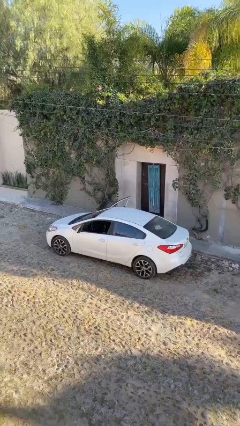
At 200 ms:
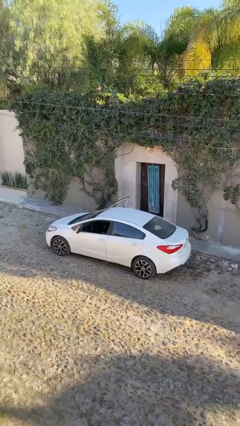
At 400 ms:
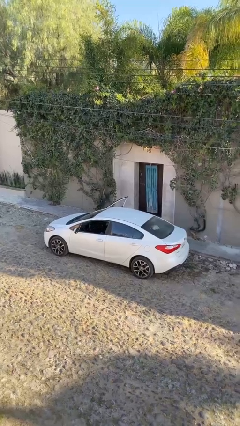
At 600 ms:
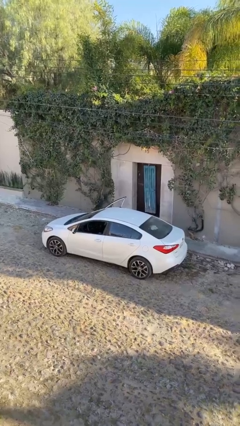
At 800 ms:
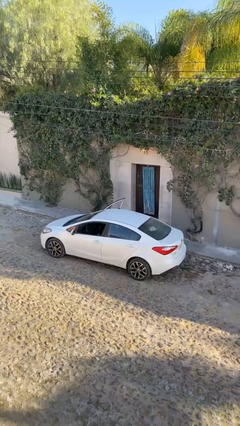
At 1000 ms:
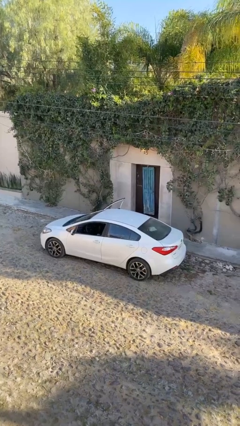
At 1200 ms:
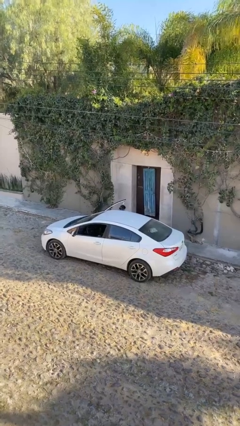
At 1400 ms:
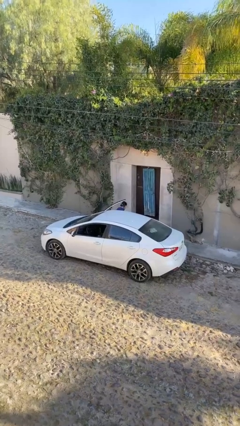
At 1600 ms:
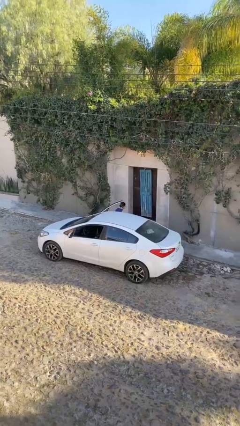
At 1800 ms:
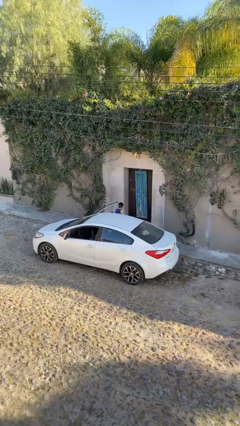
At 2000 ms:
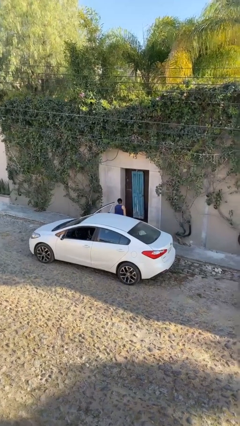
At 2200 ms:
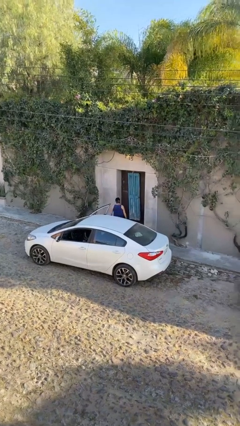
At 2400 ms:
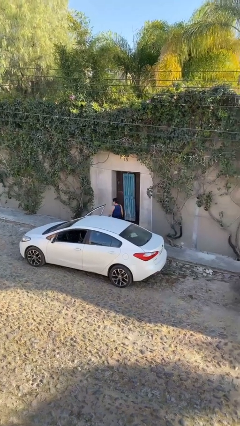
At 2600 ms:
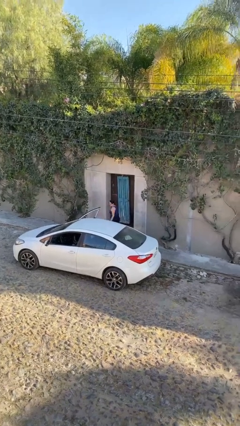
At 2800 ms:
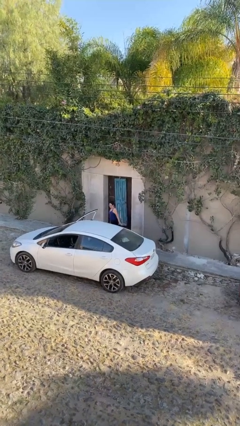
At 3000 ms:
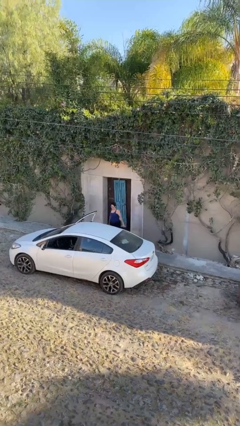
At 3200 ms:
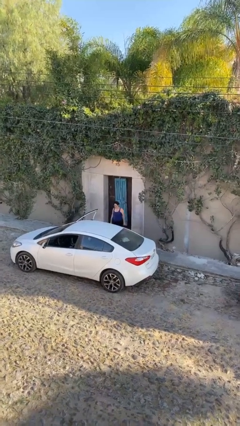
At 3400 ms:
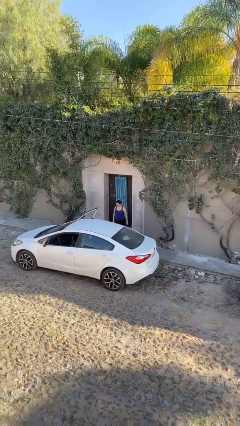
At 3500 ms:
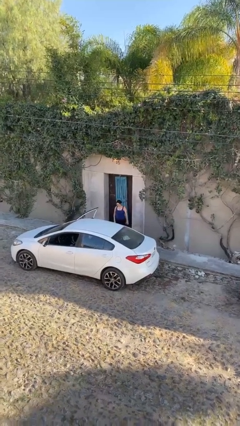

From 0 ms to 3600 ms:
person exits car

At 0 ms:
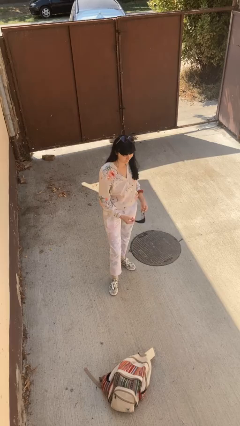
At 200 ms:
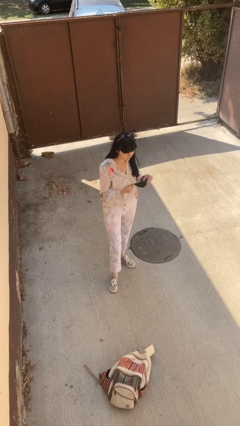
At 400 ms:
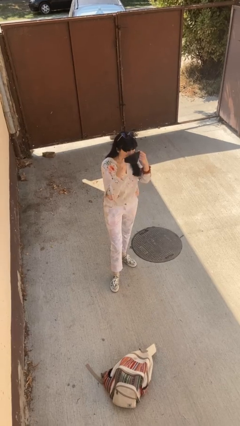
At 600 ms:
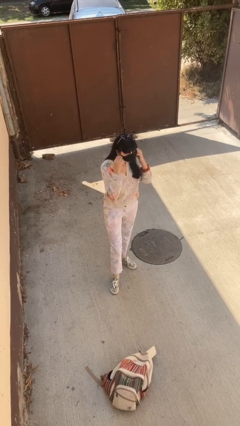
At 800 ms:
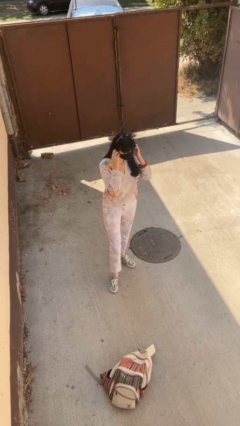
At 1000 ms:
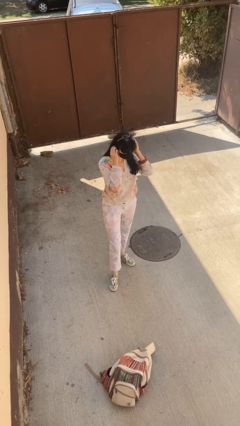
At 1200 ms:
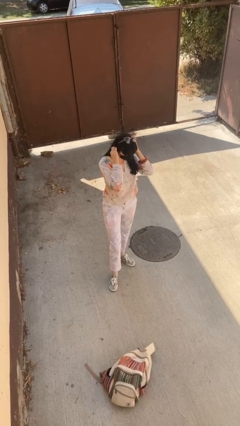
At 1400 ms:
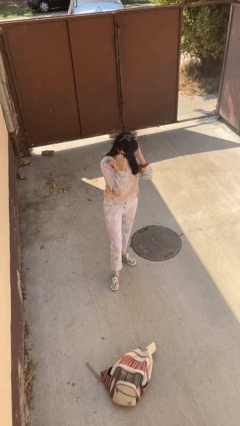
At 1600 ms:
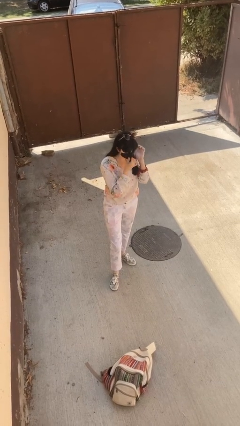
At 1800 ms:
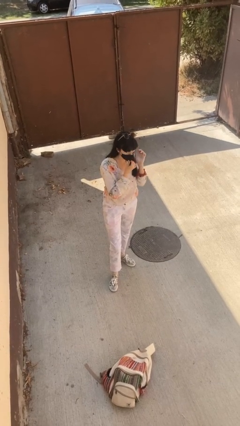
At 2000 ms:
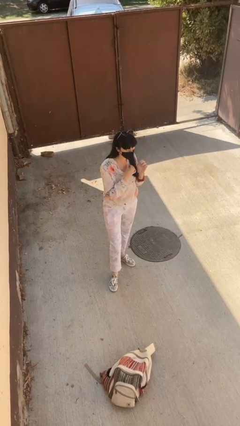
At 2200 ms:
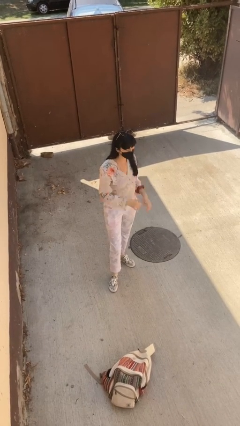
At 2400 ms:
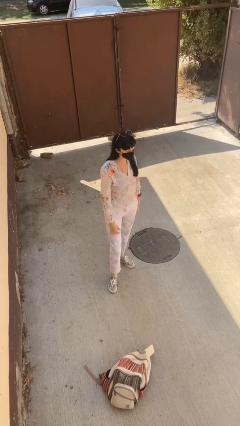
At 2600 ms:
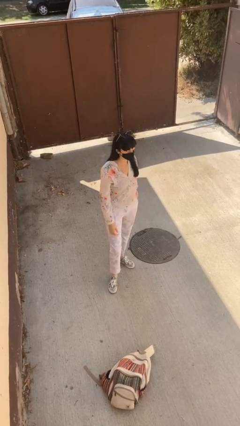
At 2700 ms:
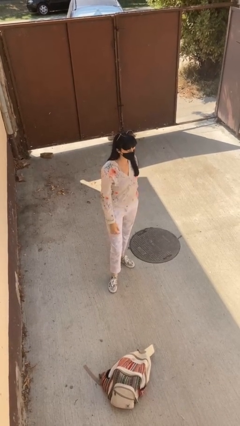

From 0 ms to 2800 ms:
person puts on facemask

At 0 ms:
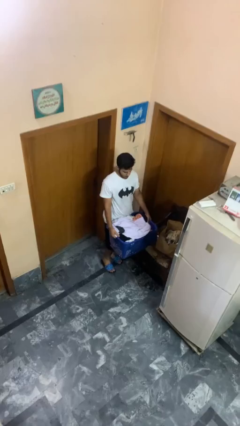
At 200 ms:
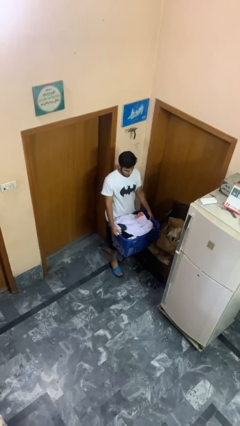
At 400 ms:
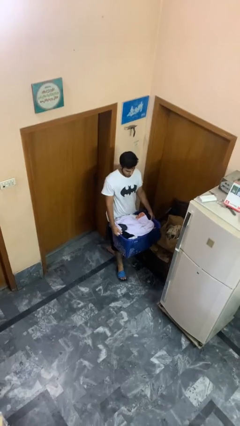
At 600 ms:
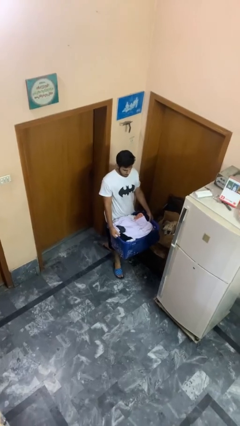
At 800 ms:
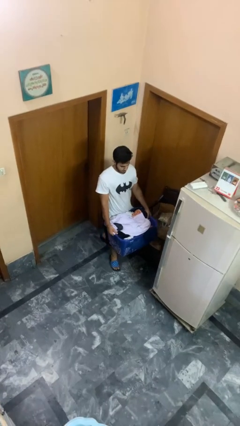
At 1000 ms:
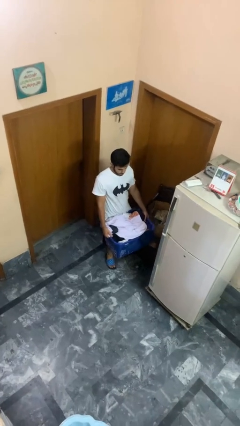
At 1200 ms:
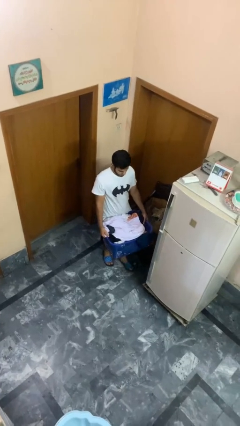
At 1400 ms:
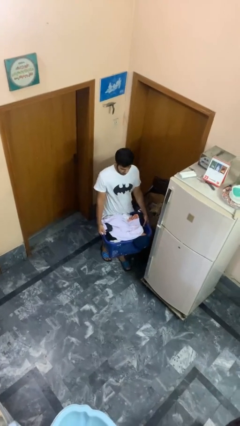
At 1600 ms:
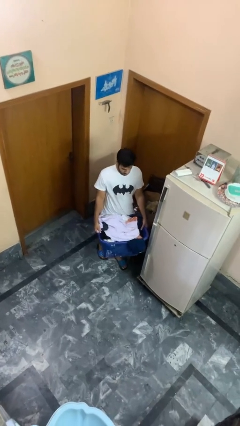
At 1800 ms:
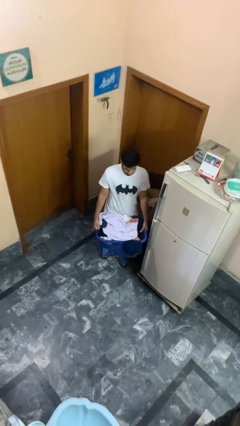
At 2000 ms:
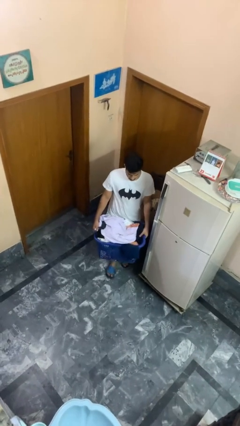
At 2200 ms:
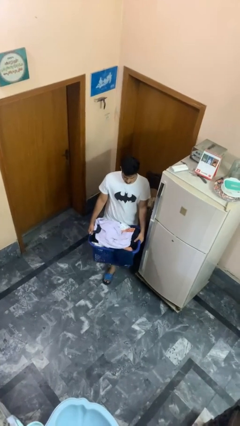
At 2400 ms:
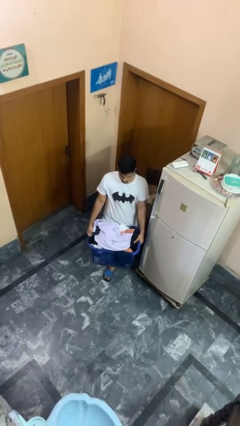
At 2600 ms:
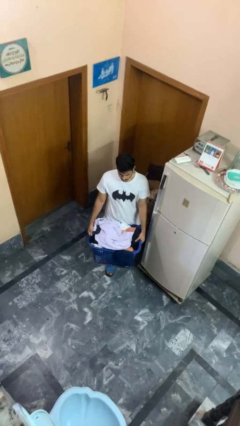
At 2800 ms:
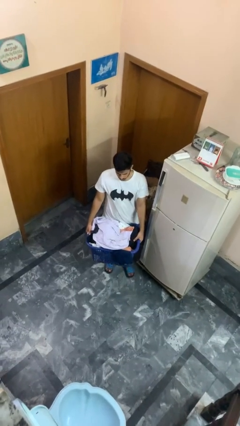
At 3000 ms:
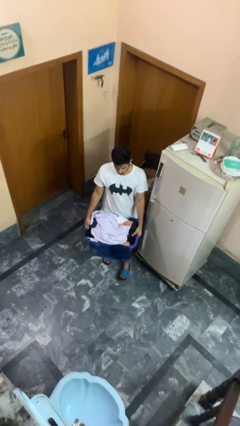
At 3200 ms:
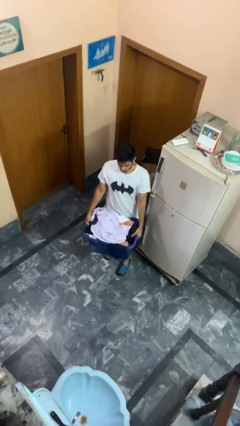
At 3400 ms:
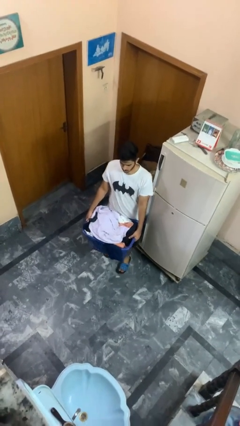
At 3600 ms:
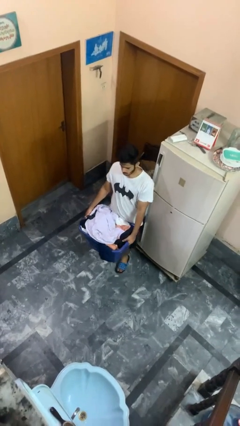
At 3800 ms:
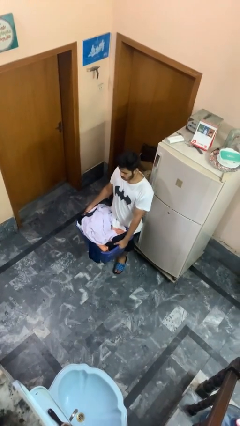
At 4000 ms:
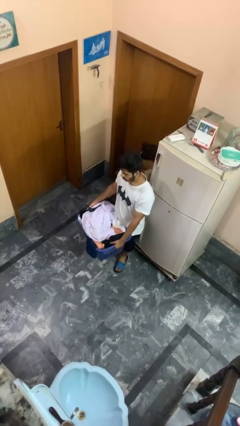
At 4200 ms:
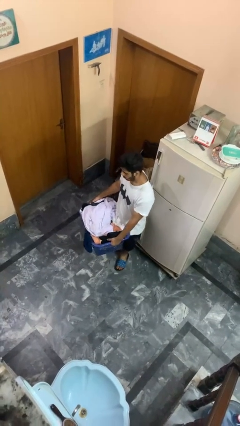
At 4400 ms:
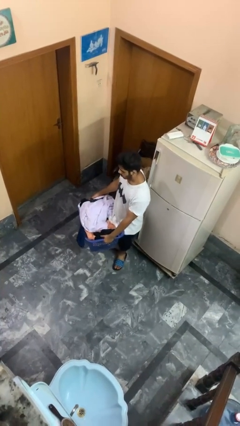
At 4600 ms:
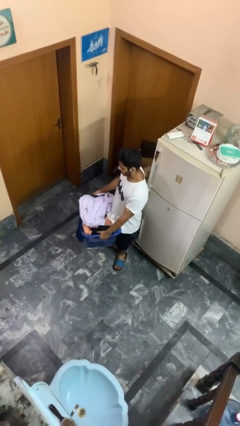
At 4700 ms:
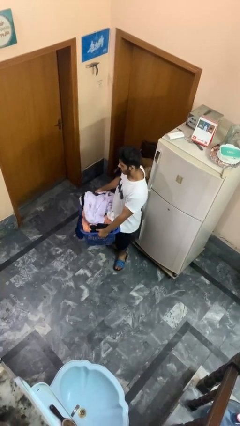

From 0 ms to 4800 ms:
person carries laundry basket

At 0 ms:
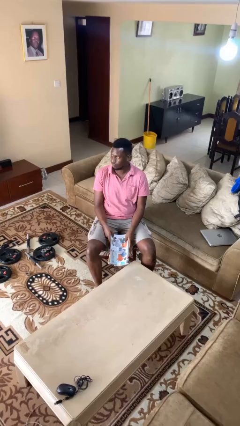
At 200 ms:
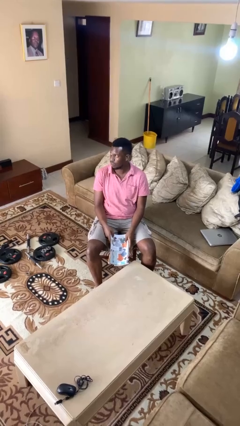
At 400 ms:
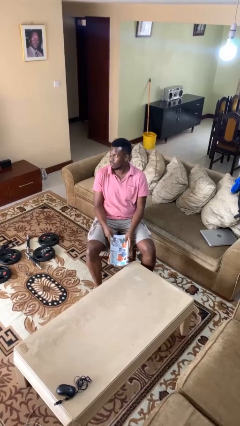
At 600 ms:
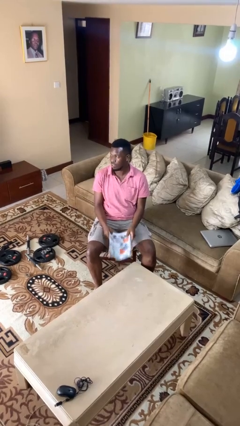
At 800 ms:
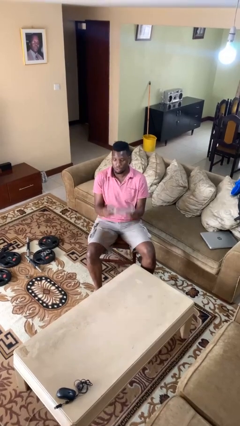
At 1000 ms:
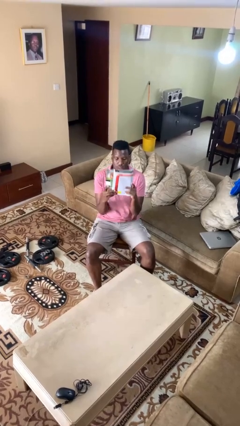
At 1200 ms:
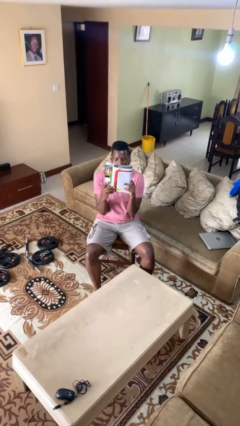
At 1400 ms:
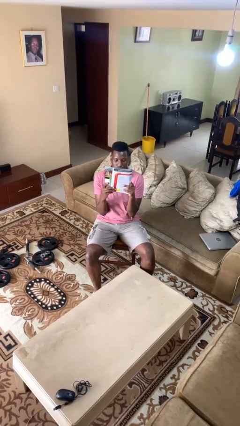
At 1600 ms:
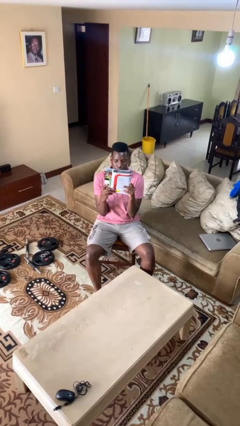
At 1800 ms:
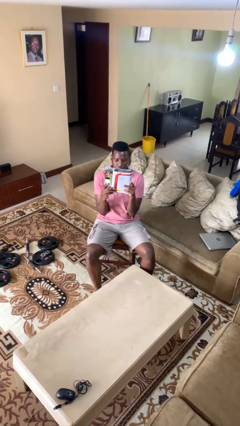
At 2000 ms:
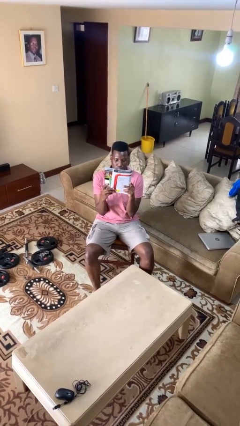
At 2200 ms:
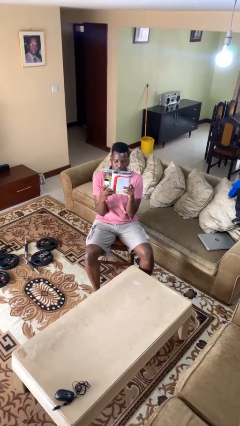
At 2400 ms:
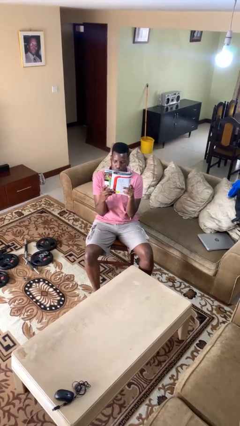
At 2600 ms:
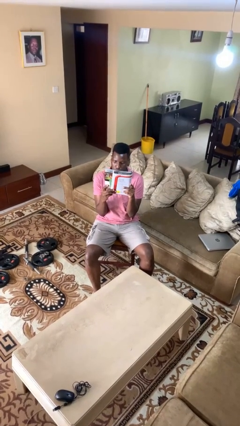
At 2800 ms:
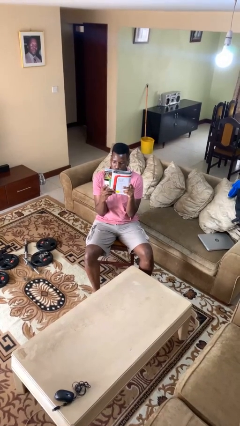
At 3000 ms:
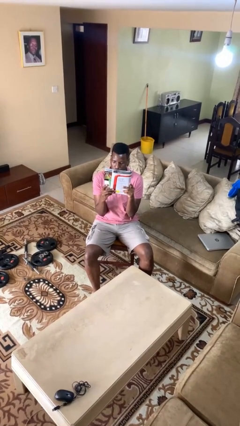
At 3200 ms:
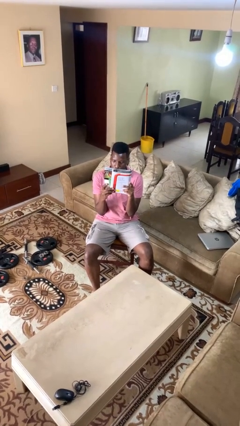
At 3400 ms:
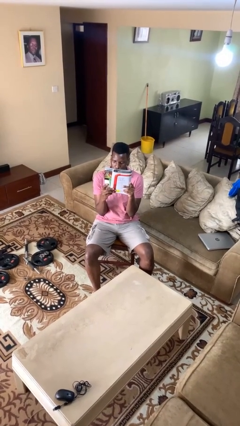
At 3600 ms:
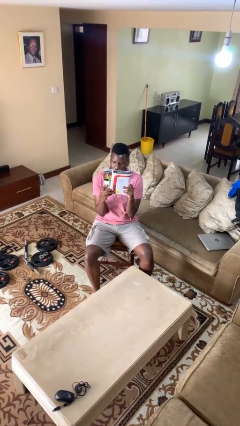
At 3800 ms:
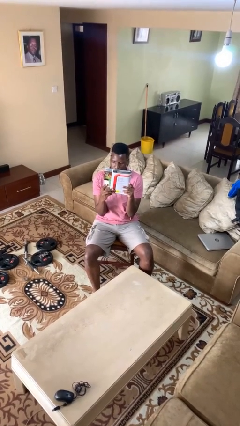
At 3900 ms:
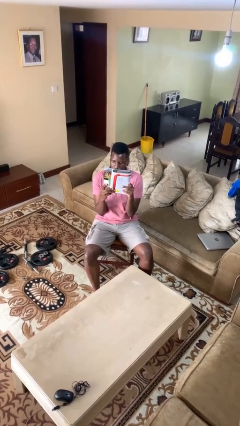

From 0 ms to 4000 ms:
person reads document

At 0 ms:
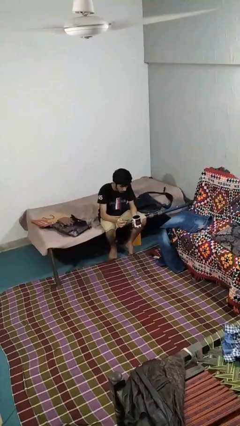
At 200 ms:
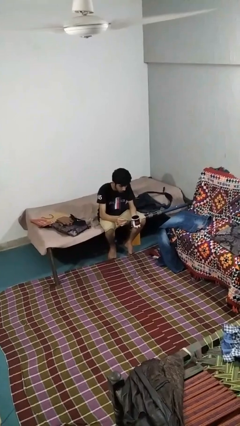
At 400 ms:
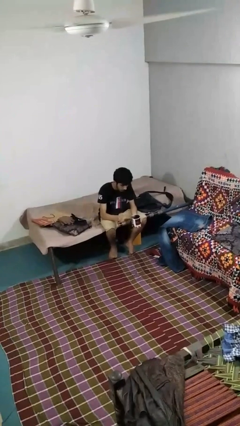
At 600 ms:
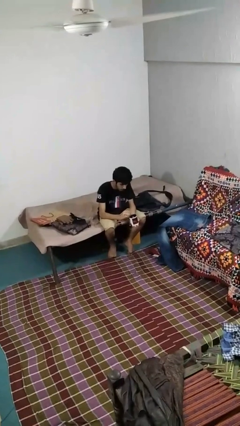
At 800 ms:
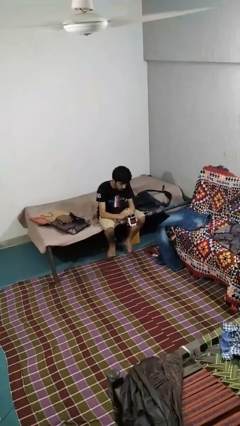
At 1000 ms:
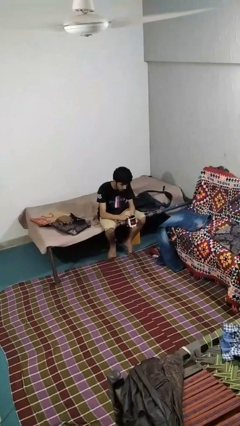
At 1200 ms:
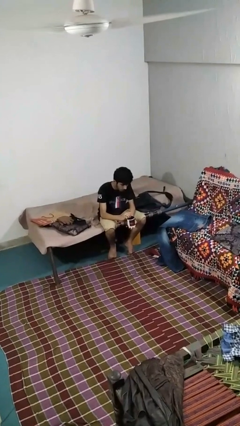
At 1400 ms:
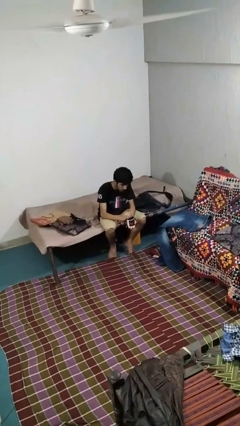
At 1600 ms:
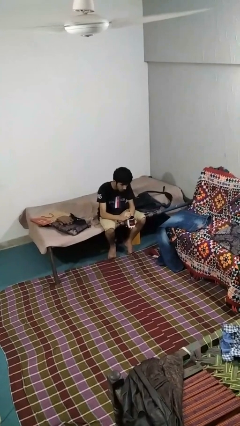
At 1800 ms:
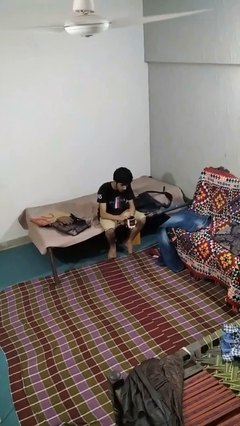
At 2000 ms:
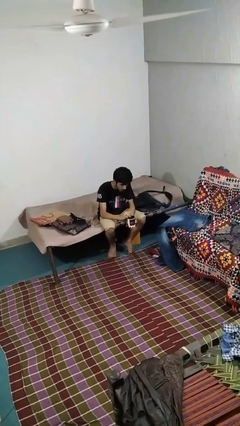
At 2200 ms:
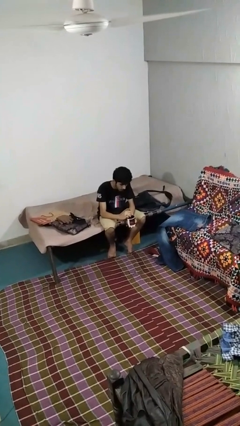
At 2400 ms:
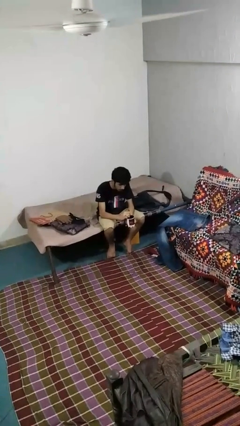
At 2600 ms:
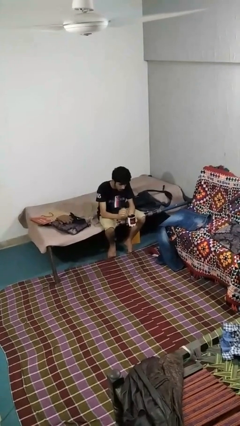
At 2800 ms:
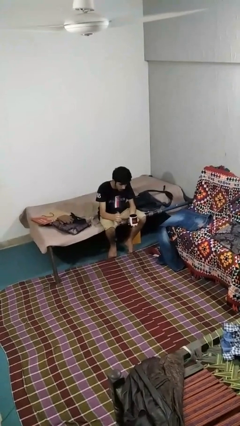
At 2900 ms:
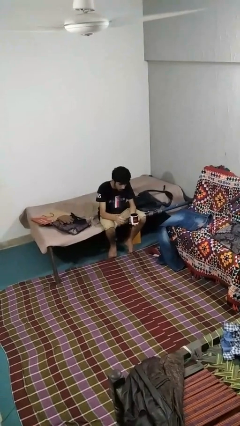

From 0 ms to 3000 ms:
person stirs mug
